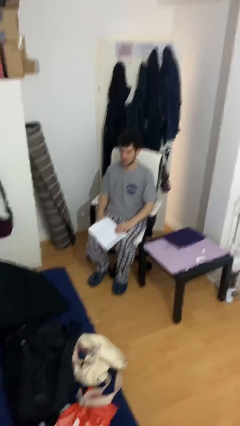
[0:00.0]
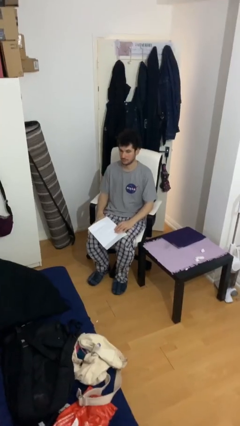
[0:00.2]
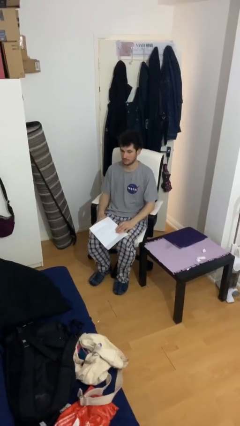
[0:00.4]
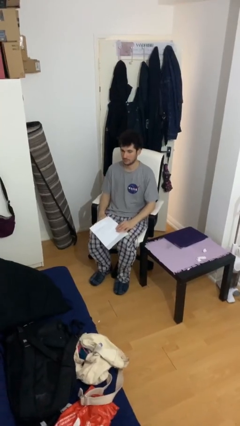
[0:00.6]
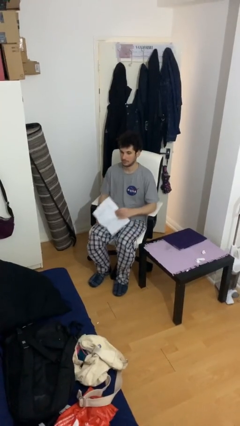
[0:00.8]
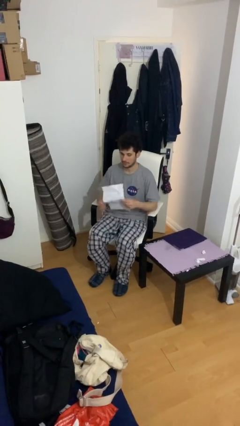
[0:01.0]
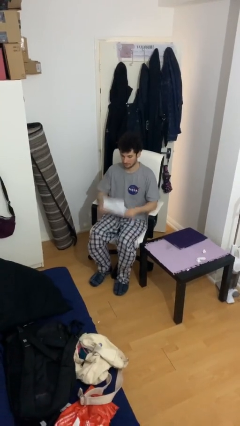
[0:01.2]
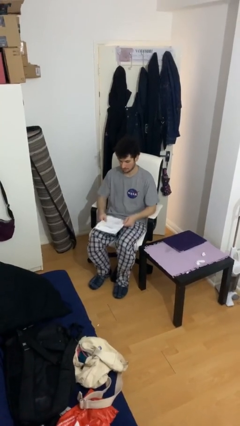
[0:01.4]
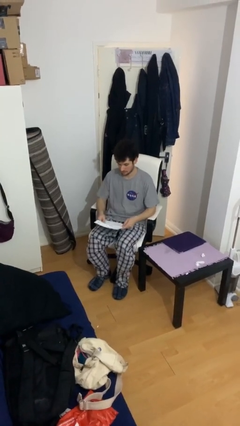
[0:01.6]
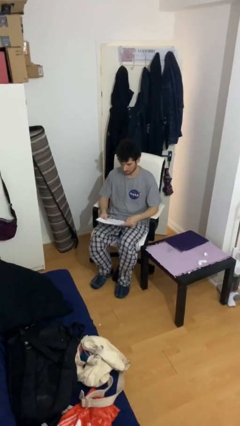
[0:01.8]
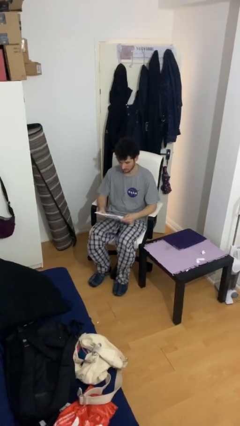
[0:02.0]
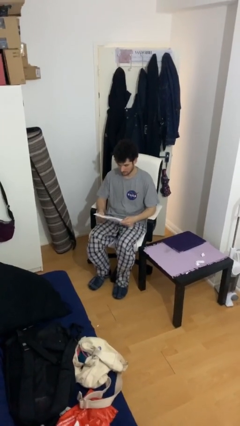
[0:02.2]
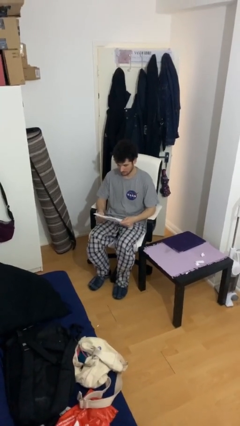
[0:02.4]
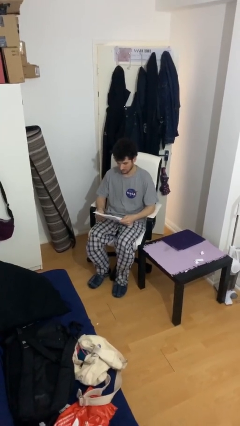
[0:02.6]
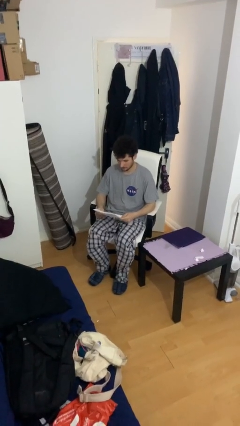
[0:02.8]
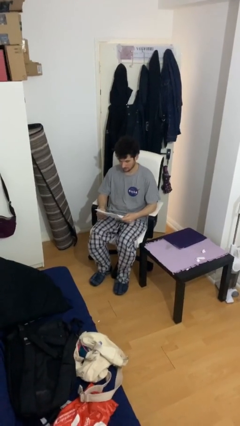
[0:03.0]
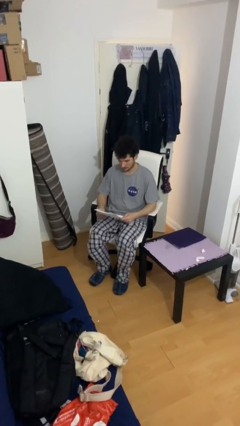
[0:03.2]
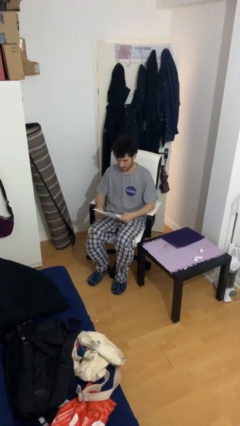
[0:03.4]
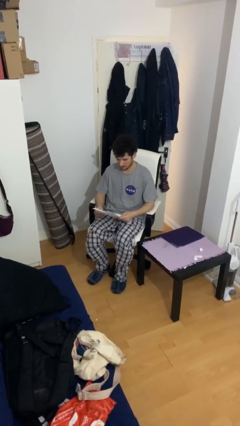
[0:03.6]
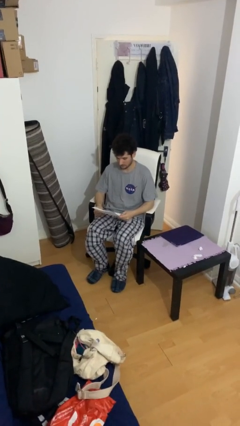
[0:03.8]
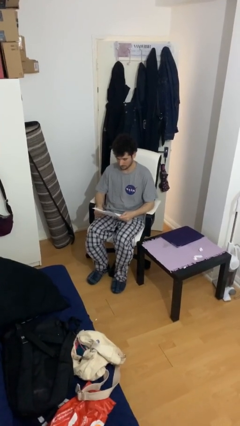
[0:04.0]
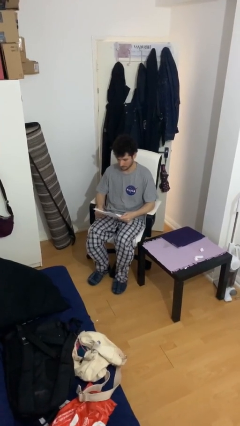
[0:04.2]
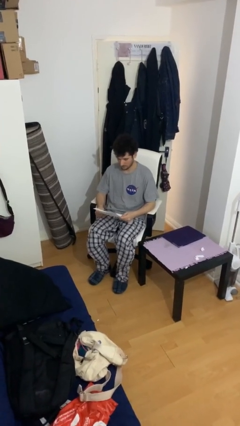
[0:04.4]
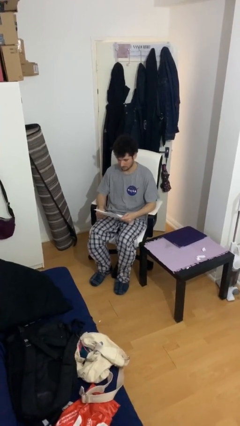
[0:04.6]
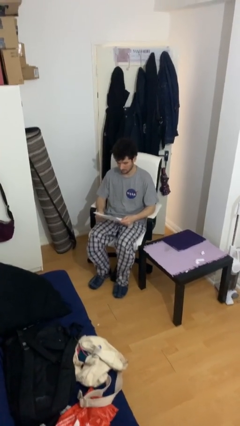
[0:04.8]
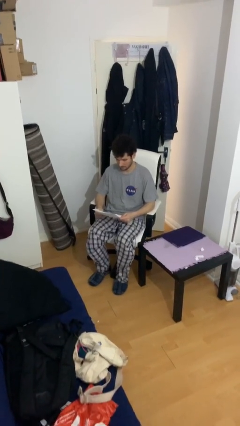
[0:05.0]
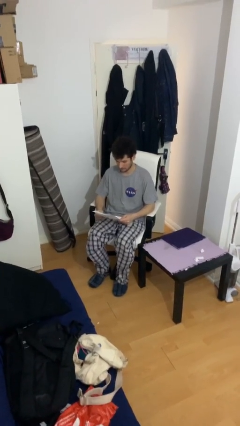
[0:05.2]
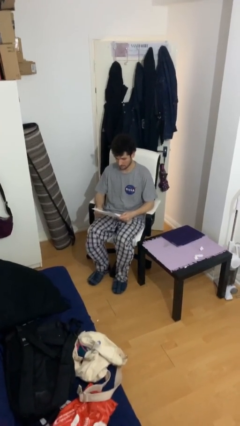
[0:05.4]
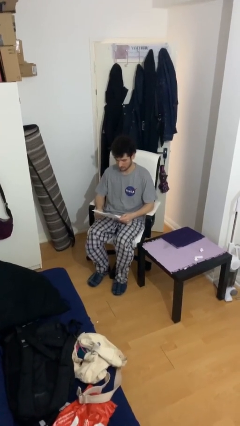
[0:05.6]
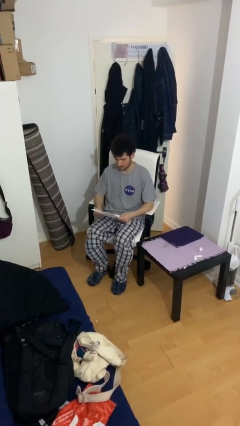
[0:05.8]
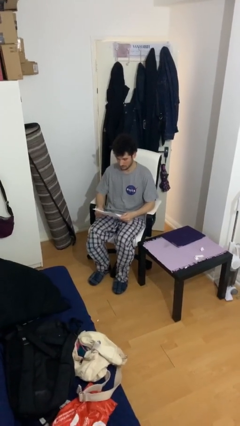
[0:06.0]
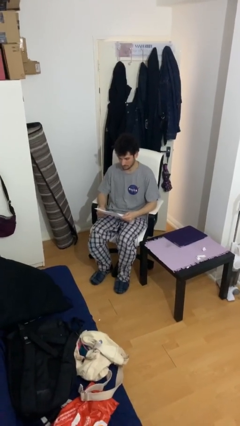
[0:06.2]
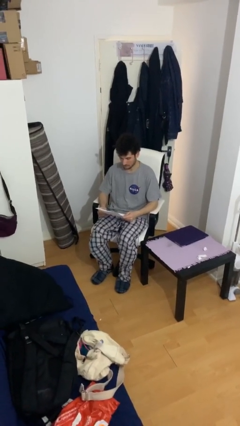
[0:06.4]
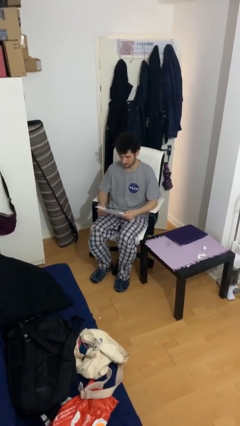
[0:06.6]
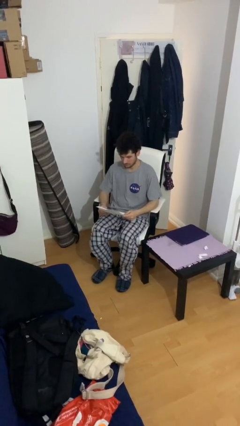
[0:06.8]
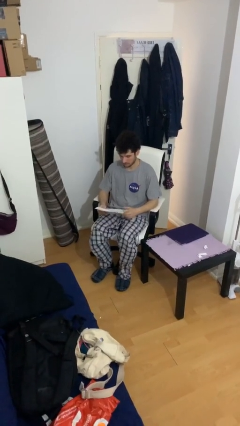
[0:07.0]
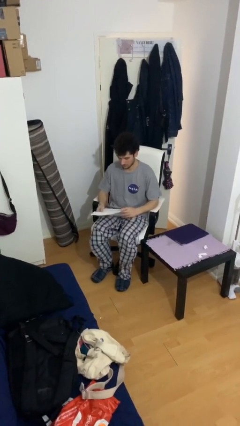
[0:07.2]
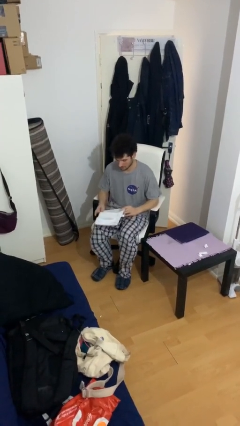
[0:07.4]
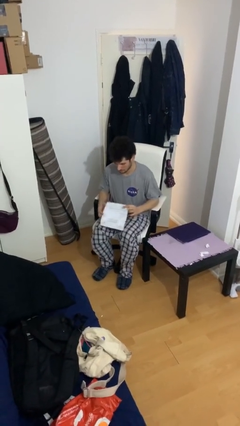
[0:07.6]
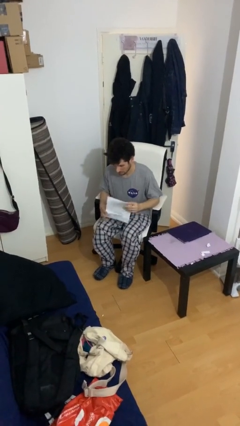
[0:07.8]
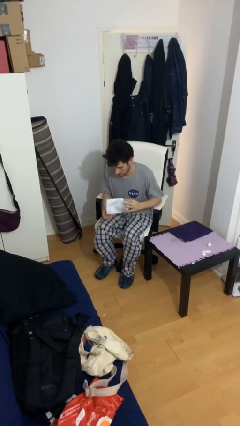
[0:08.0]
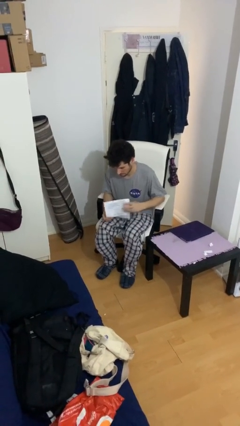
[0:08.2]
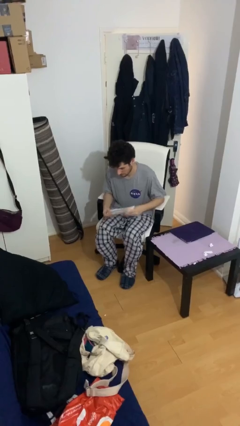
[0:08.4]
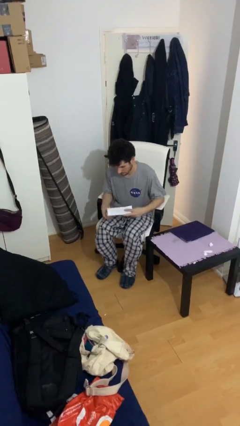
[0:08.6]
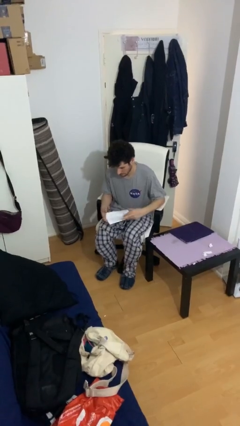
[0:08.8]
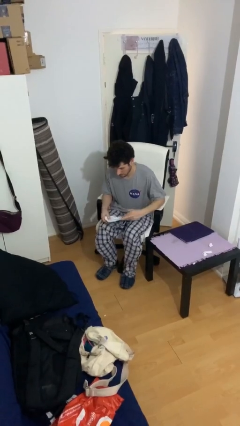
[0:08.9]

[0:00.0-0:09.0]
person reads document

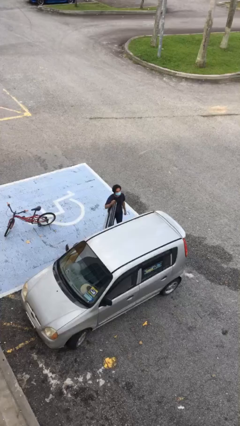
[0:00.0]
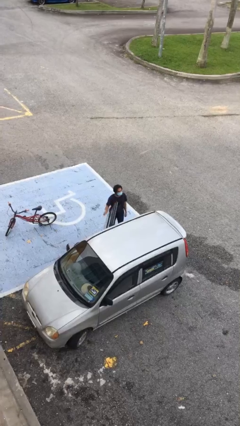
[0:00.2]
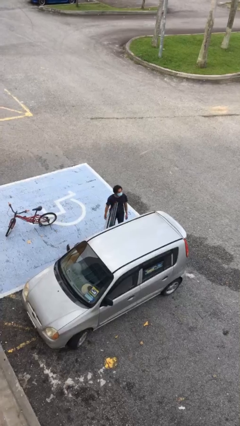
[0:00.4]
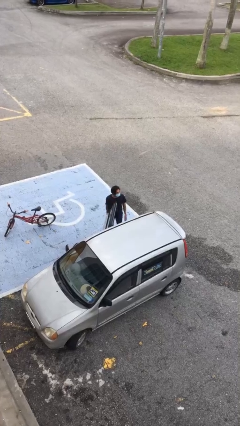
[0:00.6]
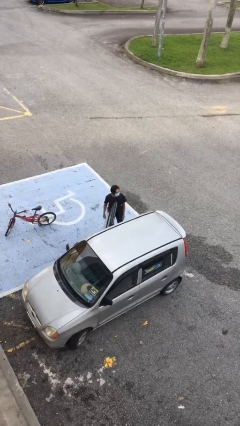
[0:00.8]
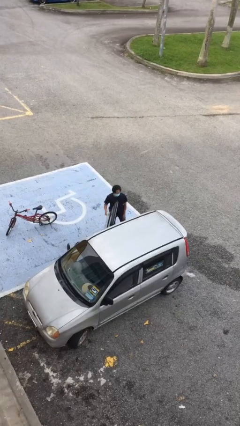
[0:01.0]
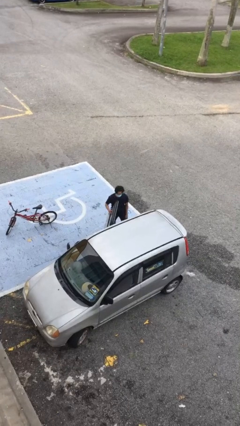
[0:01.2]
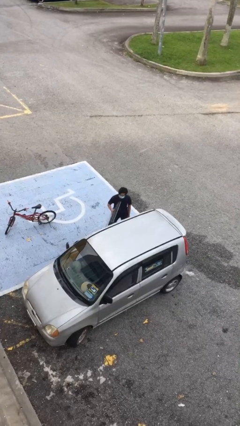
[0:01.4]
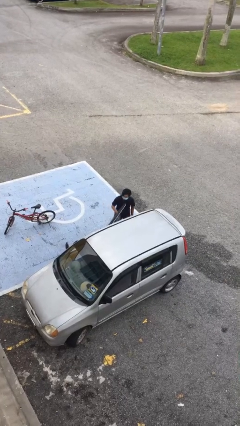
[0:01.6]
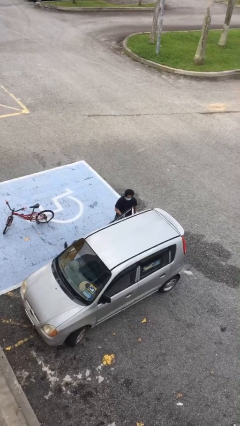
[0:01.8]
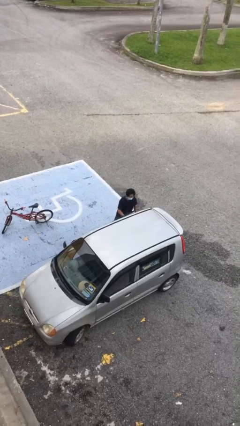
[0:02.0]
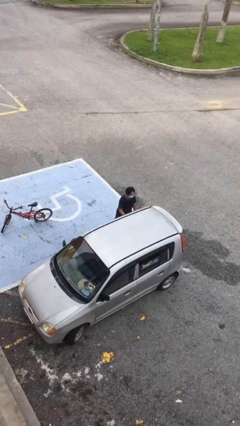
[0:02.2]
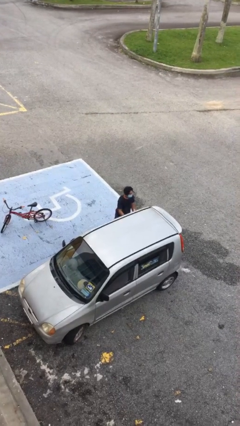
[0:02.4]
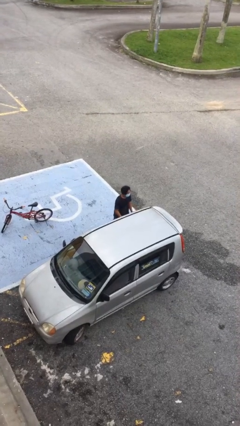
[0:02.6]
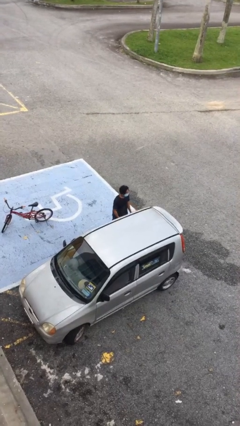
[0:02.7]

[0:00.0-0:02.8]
person closes car door

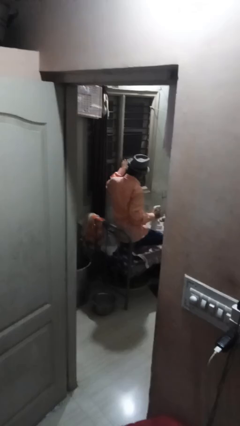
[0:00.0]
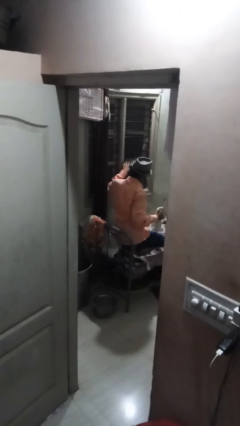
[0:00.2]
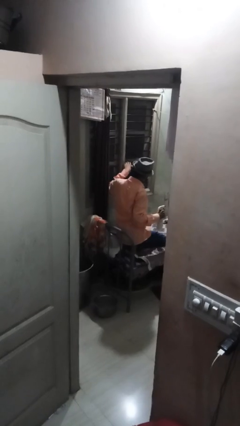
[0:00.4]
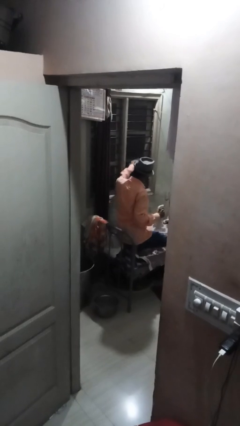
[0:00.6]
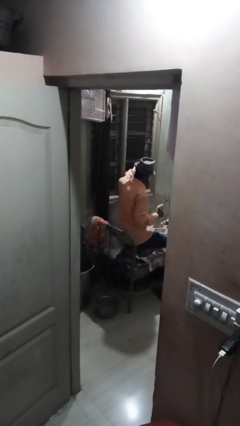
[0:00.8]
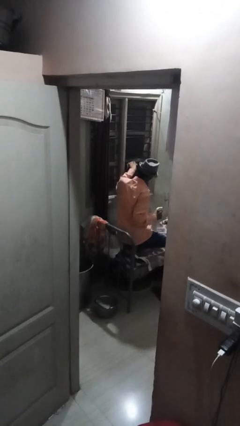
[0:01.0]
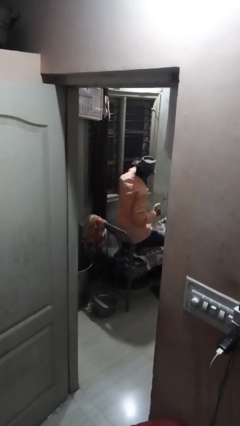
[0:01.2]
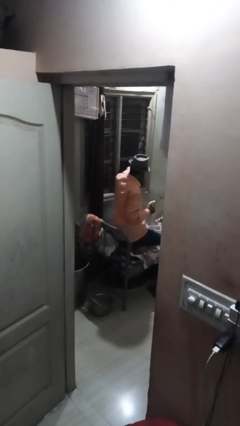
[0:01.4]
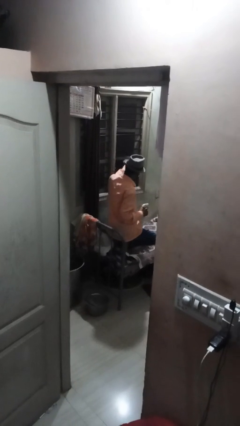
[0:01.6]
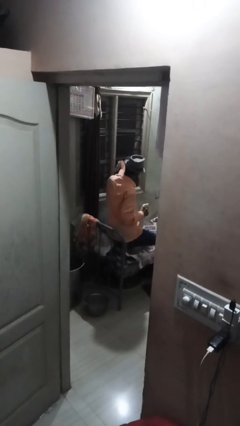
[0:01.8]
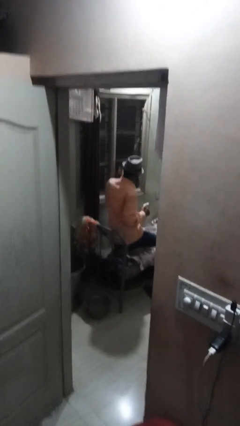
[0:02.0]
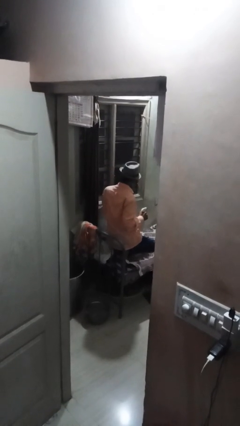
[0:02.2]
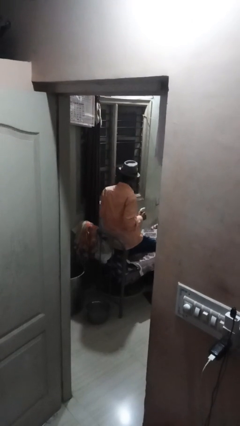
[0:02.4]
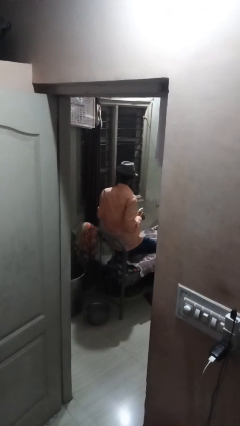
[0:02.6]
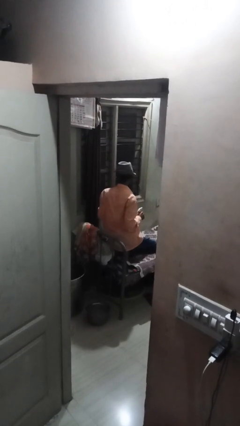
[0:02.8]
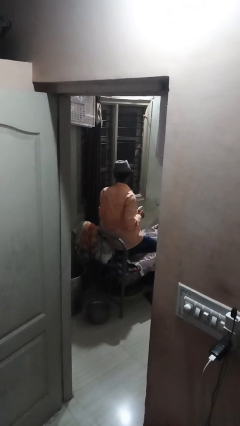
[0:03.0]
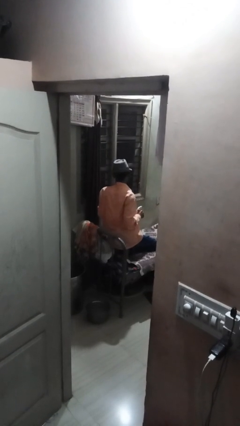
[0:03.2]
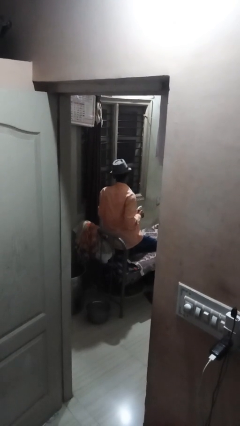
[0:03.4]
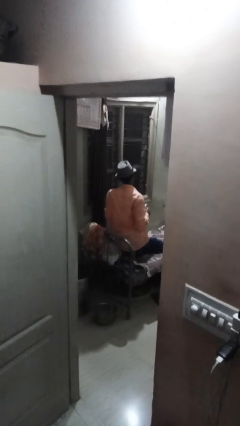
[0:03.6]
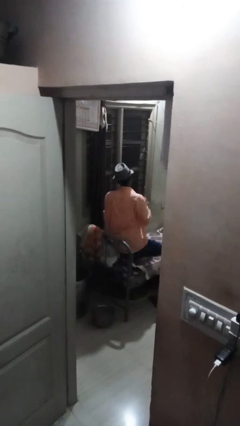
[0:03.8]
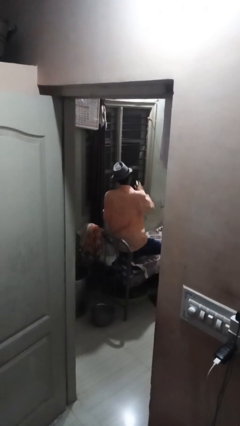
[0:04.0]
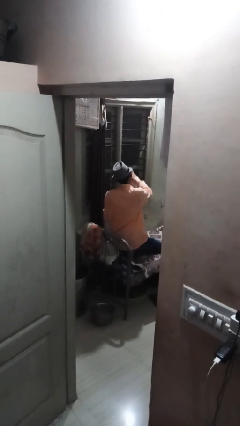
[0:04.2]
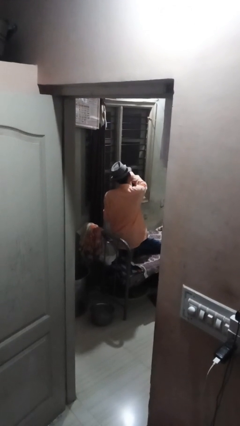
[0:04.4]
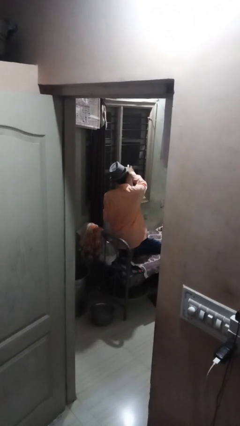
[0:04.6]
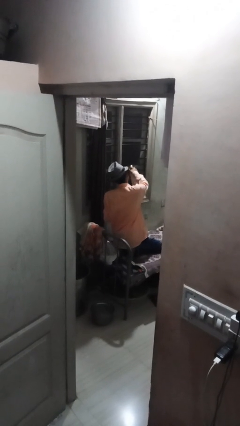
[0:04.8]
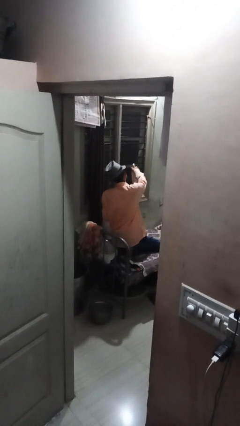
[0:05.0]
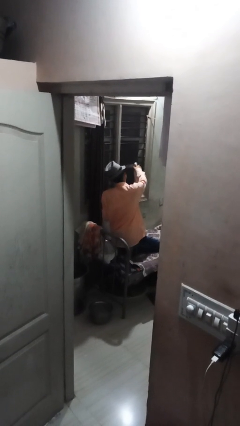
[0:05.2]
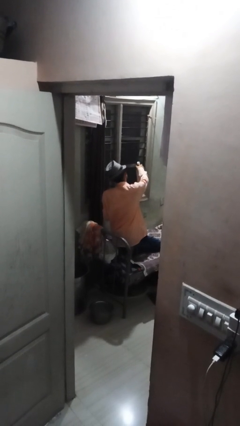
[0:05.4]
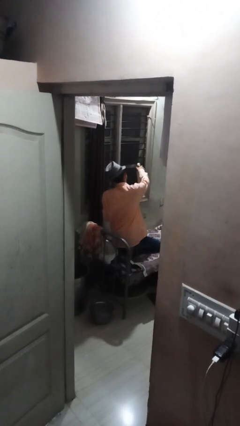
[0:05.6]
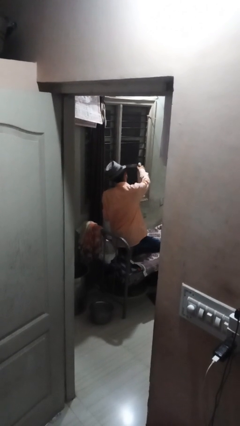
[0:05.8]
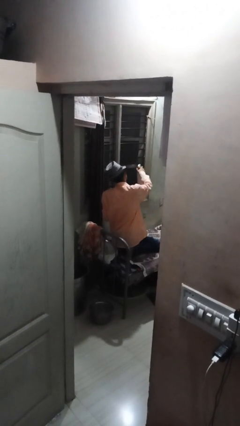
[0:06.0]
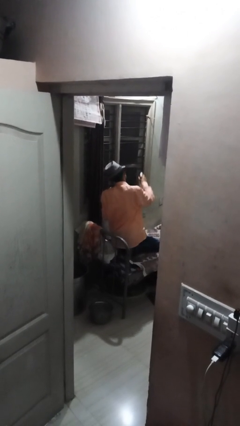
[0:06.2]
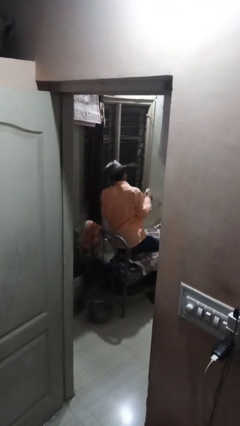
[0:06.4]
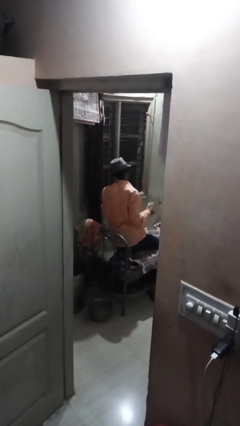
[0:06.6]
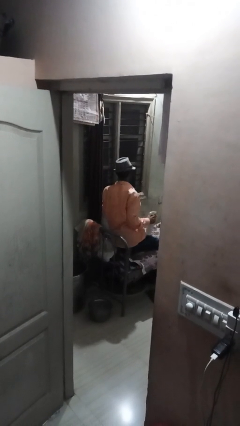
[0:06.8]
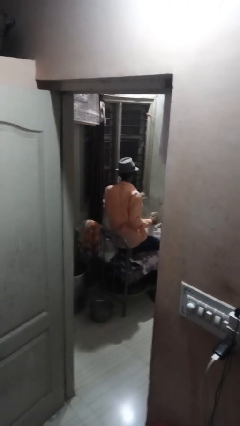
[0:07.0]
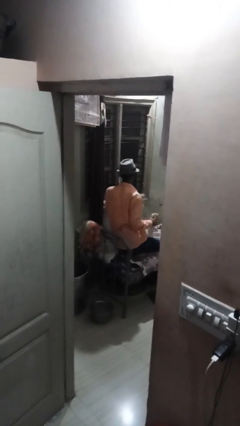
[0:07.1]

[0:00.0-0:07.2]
person washes window
